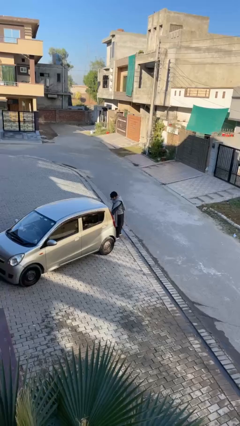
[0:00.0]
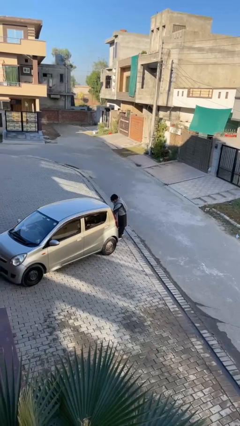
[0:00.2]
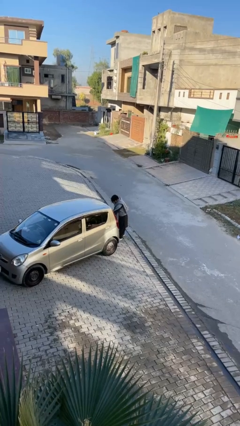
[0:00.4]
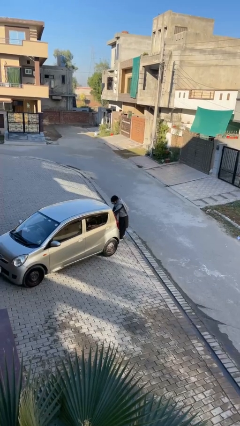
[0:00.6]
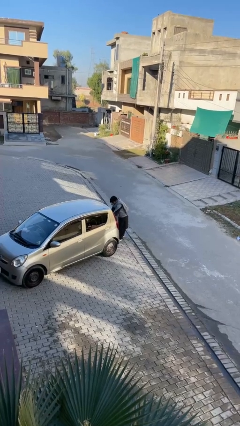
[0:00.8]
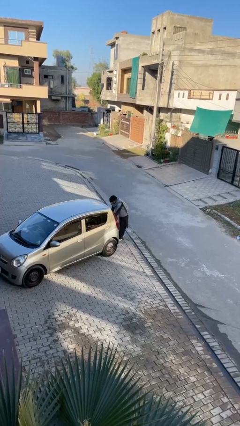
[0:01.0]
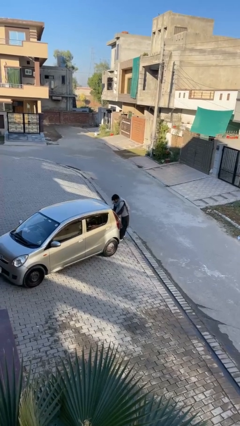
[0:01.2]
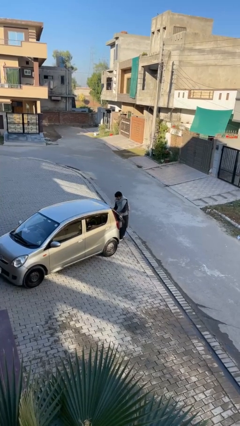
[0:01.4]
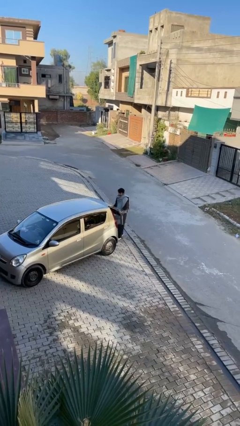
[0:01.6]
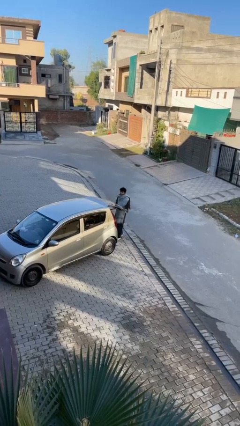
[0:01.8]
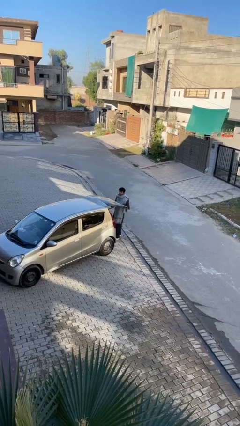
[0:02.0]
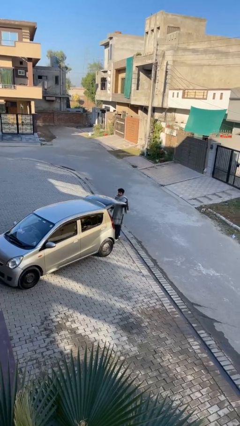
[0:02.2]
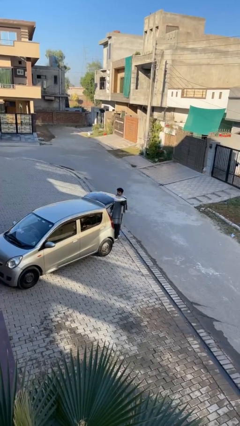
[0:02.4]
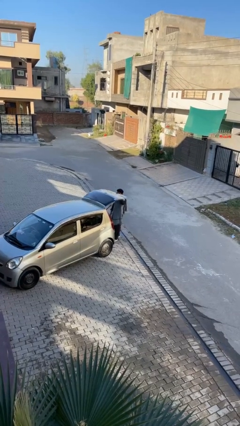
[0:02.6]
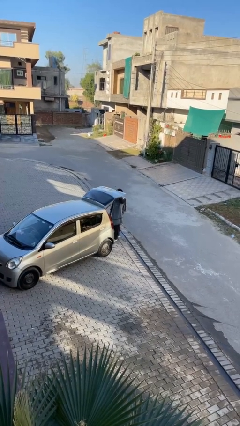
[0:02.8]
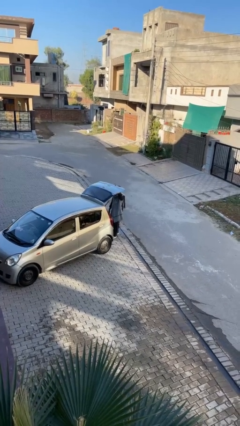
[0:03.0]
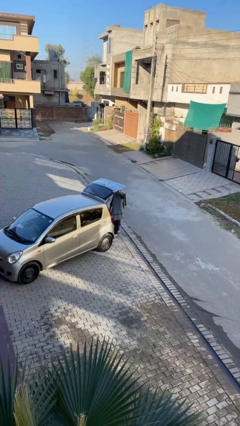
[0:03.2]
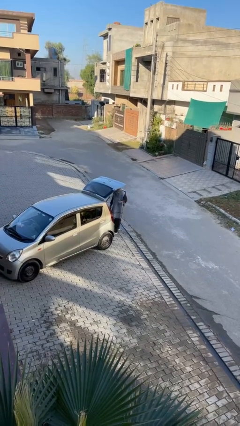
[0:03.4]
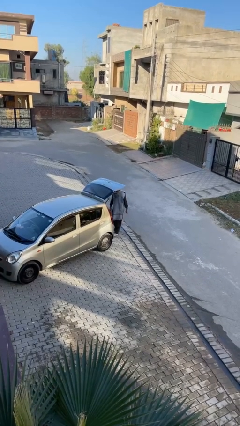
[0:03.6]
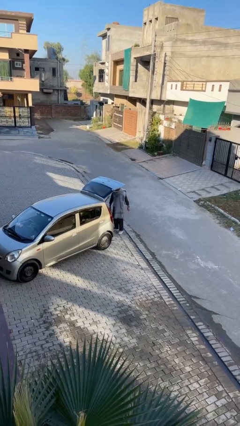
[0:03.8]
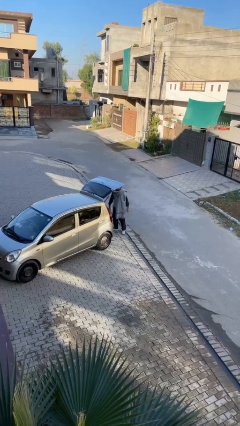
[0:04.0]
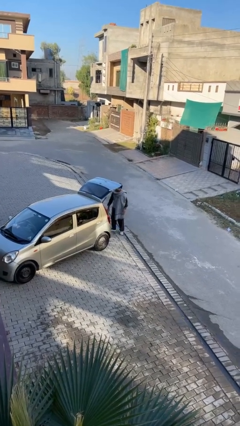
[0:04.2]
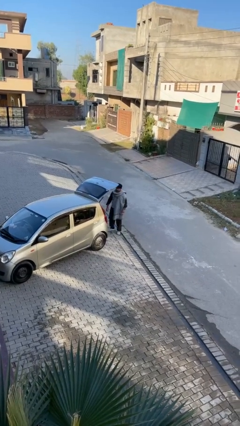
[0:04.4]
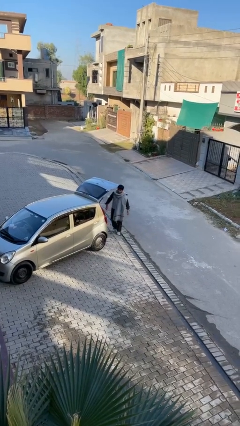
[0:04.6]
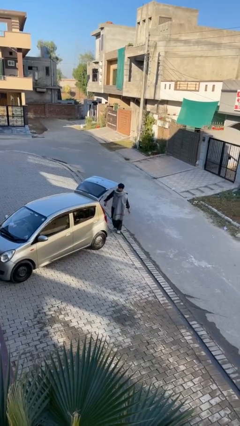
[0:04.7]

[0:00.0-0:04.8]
person opens car trunk

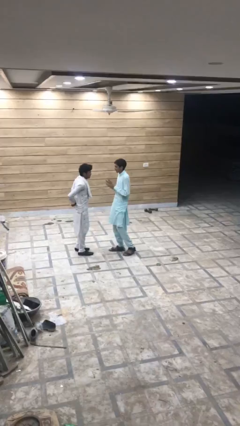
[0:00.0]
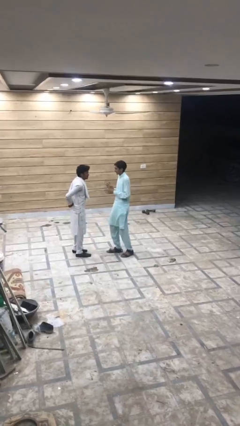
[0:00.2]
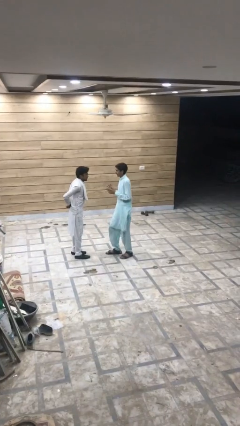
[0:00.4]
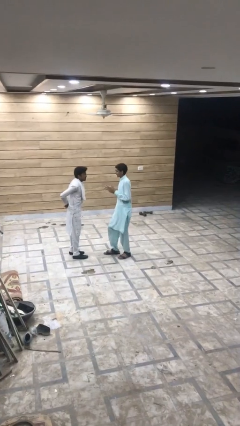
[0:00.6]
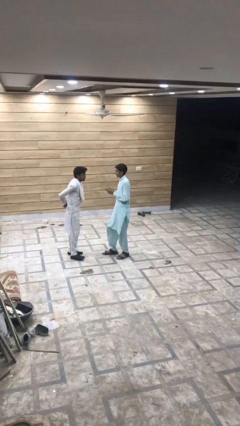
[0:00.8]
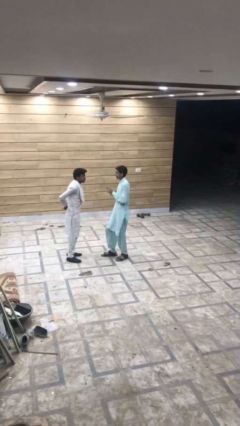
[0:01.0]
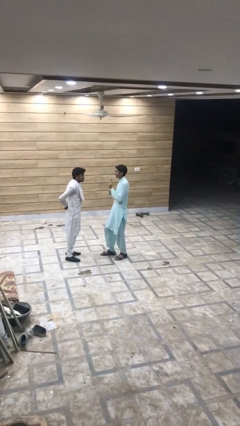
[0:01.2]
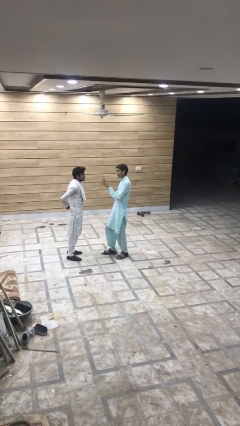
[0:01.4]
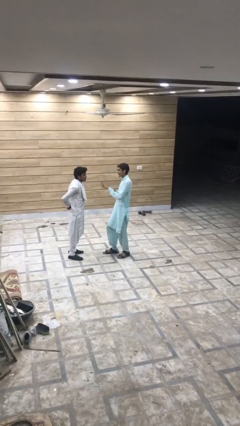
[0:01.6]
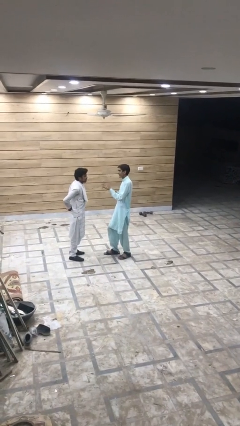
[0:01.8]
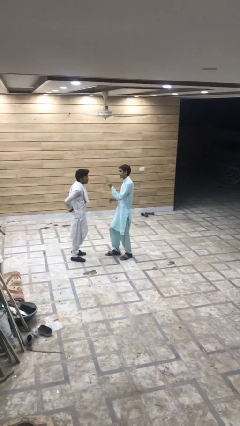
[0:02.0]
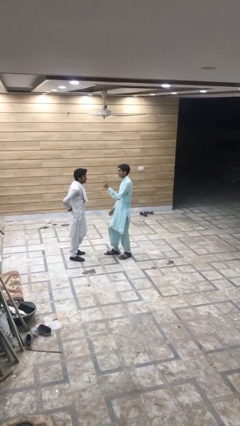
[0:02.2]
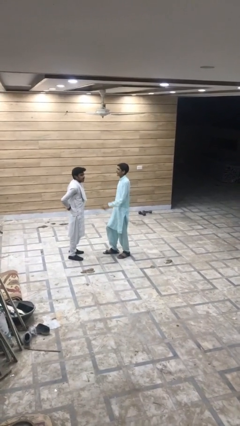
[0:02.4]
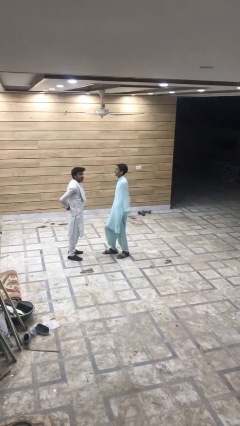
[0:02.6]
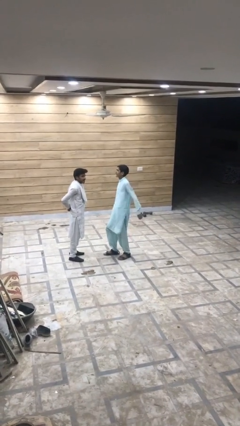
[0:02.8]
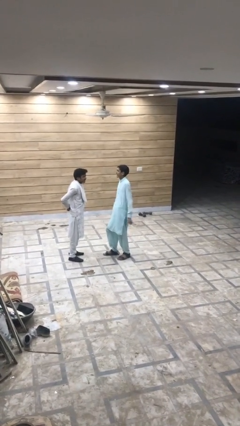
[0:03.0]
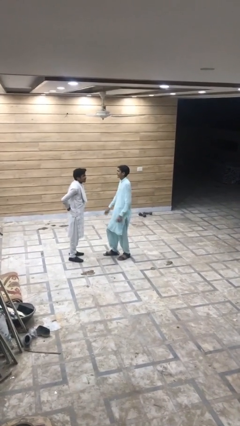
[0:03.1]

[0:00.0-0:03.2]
person talks to person

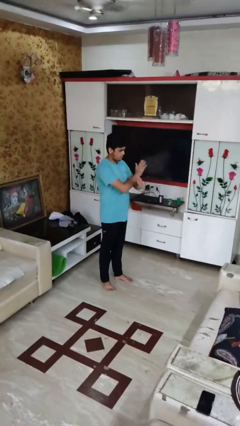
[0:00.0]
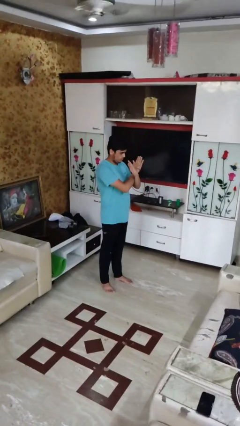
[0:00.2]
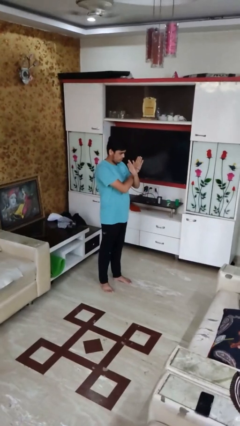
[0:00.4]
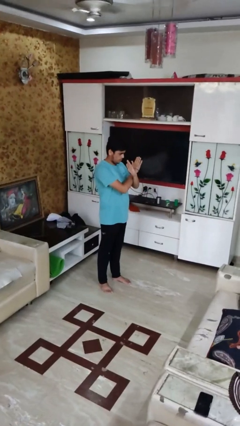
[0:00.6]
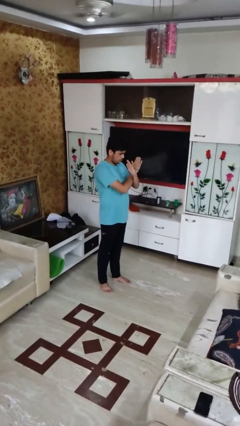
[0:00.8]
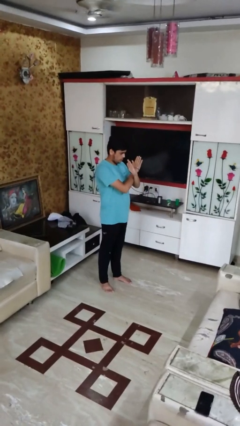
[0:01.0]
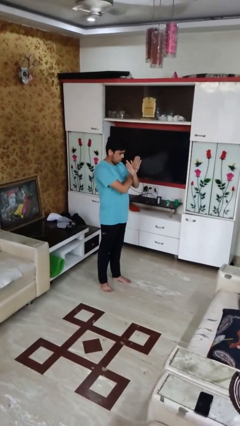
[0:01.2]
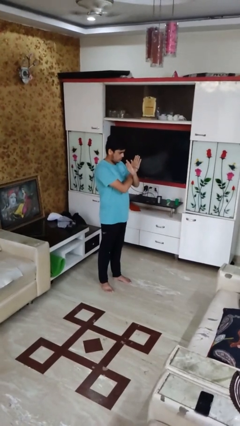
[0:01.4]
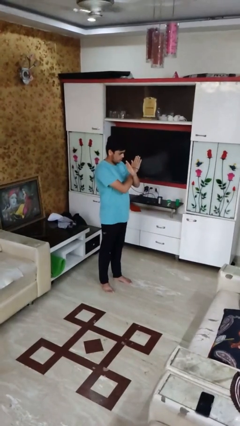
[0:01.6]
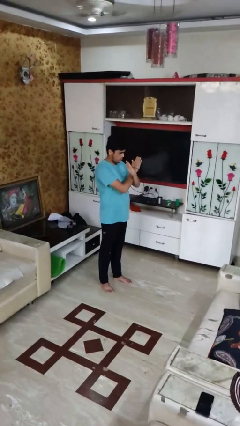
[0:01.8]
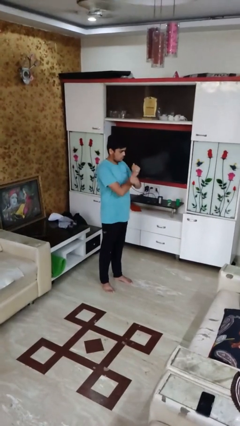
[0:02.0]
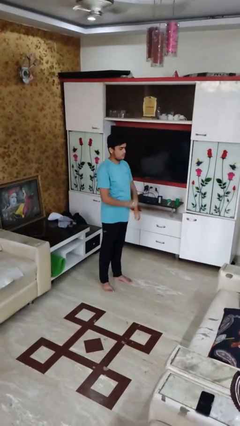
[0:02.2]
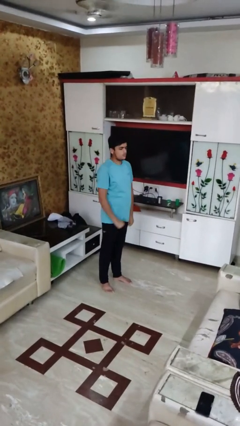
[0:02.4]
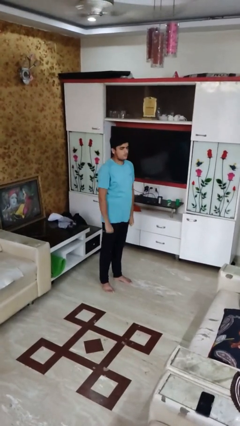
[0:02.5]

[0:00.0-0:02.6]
person gestures arms x

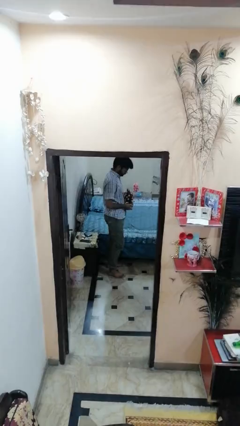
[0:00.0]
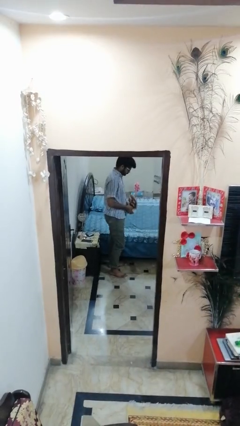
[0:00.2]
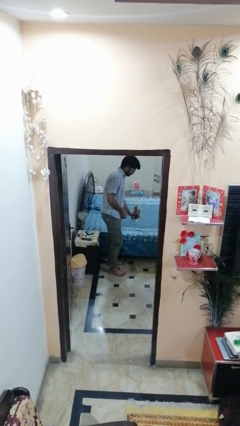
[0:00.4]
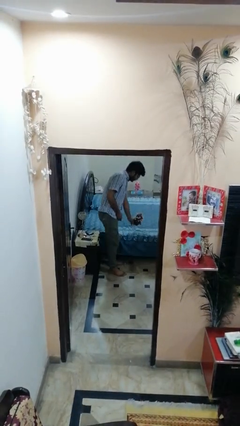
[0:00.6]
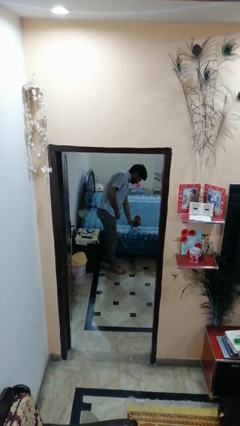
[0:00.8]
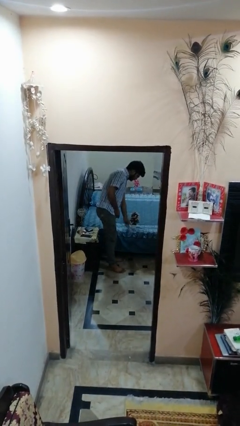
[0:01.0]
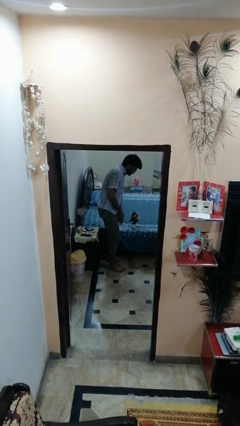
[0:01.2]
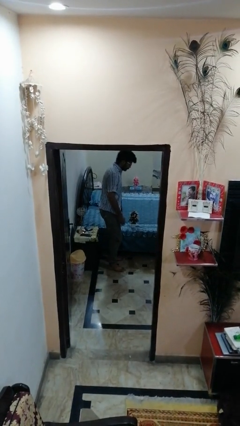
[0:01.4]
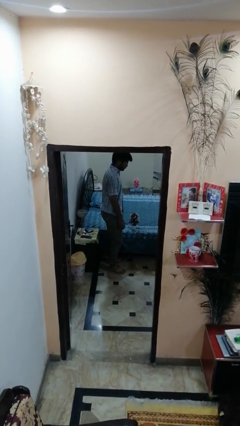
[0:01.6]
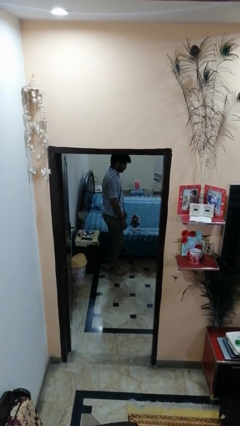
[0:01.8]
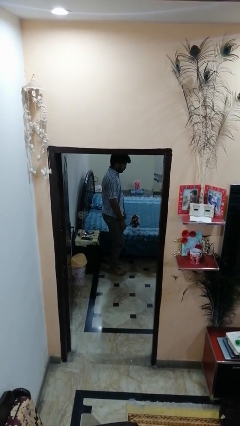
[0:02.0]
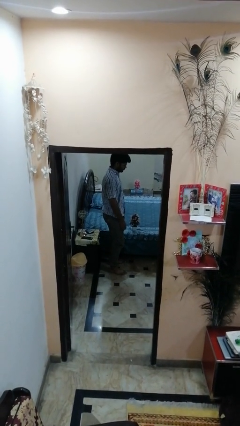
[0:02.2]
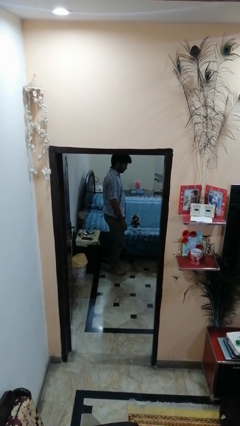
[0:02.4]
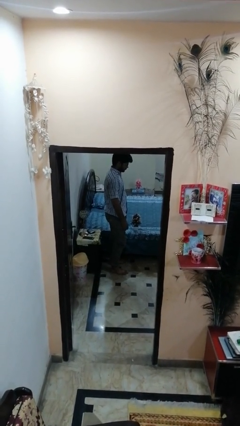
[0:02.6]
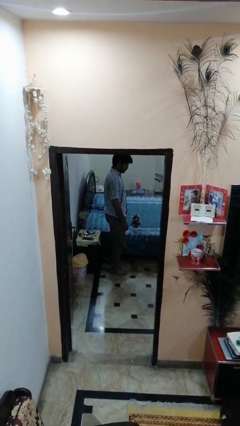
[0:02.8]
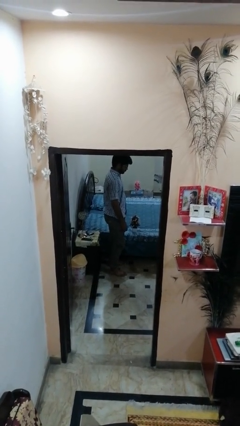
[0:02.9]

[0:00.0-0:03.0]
person puts down object on bed

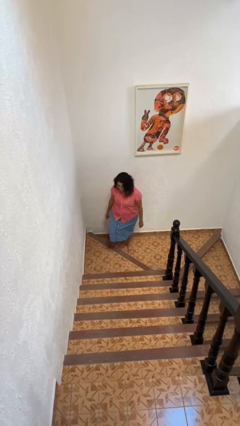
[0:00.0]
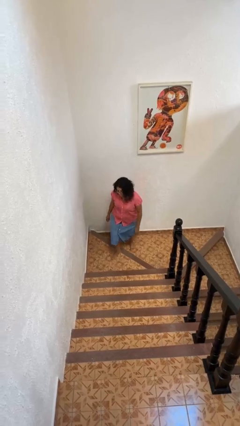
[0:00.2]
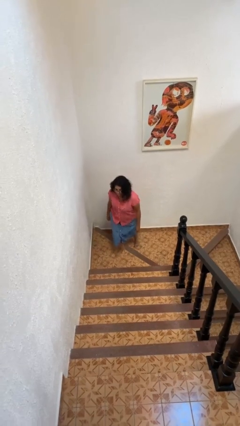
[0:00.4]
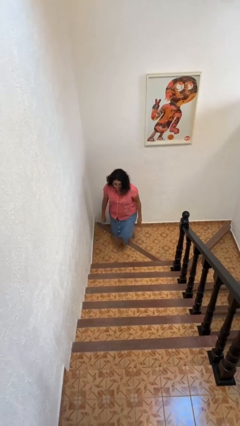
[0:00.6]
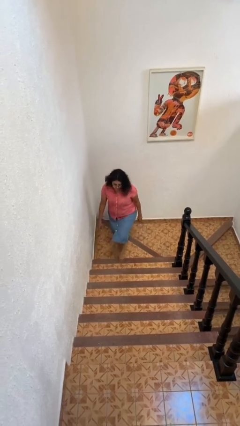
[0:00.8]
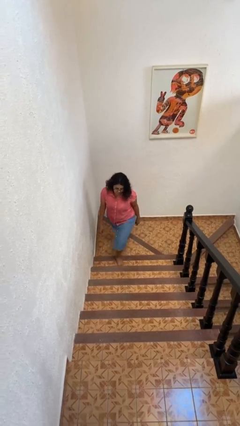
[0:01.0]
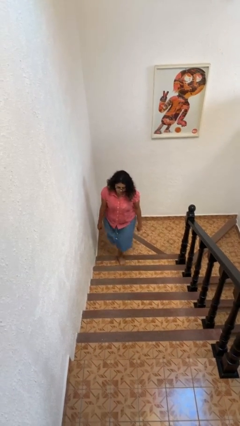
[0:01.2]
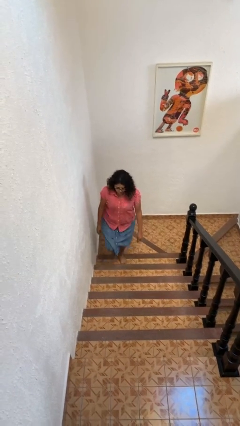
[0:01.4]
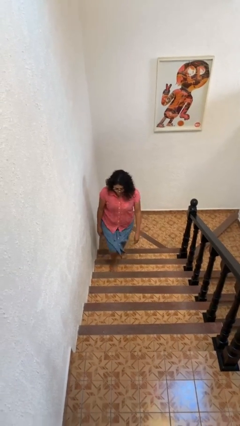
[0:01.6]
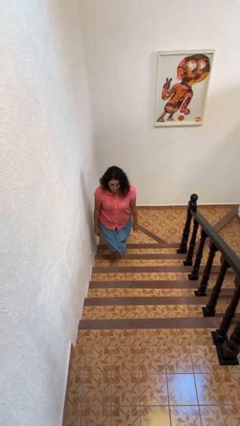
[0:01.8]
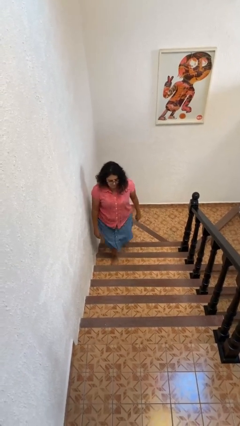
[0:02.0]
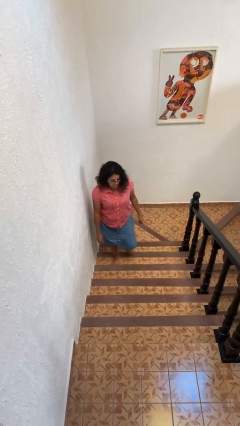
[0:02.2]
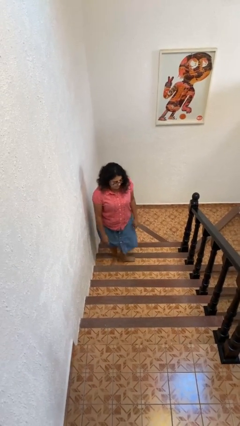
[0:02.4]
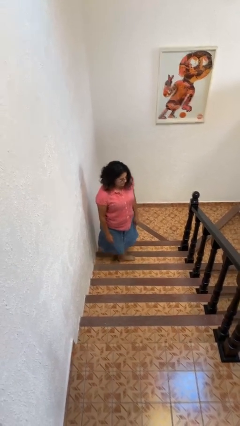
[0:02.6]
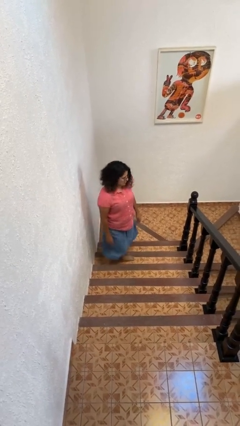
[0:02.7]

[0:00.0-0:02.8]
person climbs up stairs

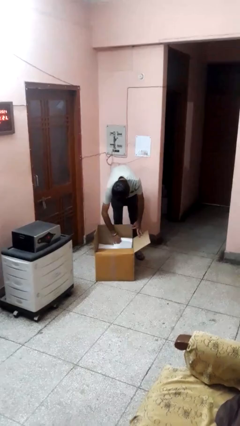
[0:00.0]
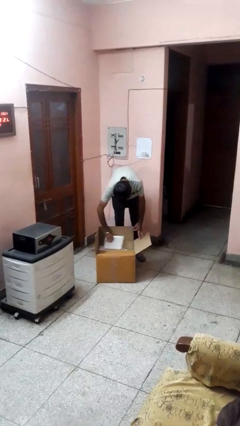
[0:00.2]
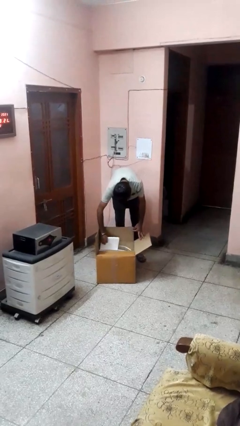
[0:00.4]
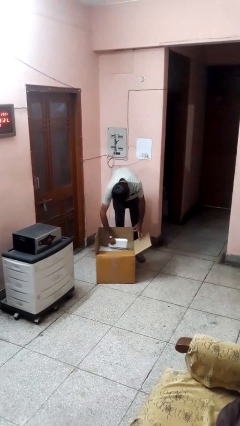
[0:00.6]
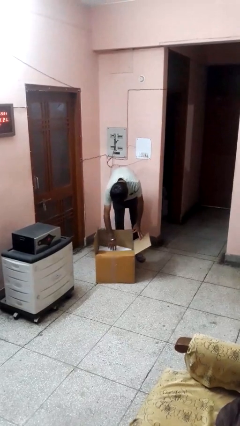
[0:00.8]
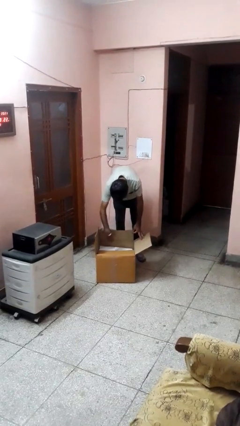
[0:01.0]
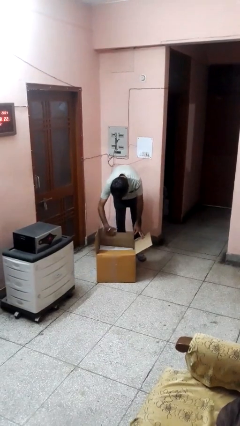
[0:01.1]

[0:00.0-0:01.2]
person searches in box
